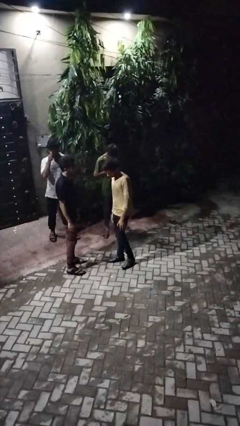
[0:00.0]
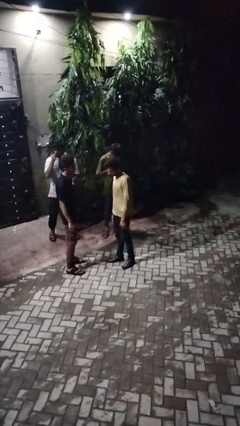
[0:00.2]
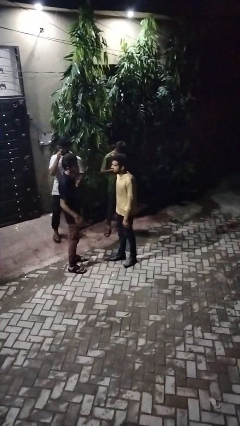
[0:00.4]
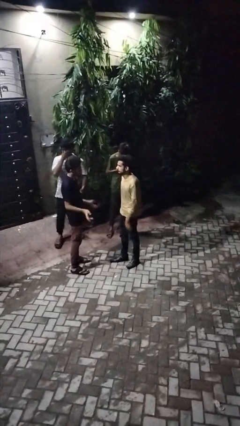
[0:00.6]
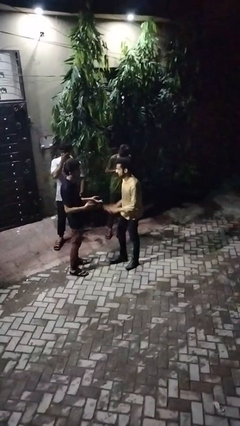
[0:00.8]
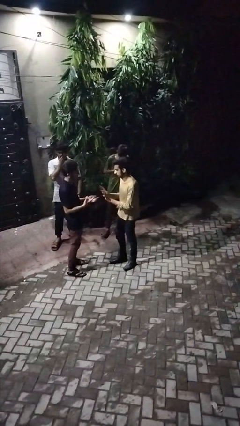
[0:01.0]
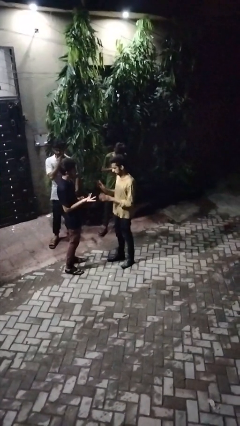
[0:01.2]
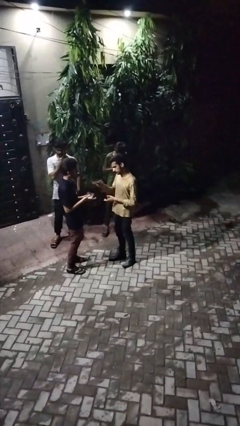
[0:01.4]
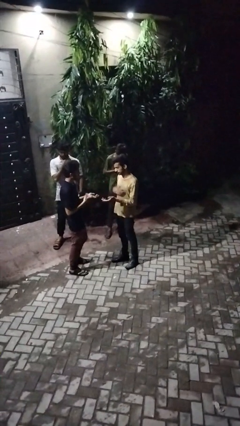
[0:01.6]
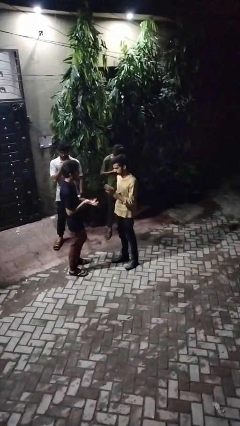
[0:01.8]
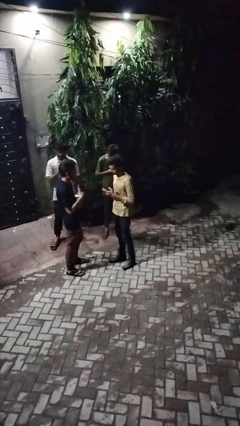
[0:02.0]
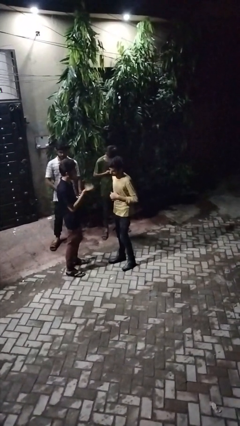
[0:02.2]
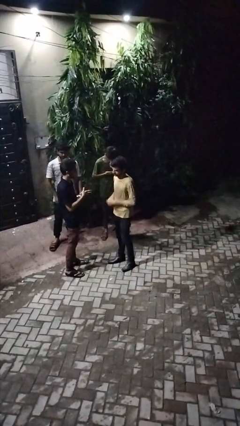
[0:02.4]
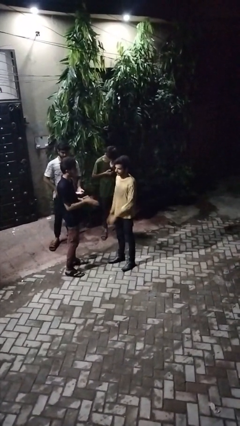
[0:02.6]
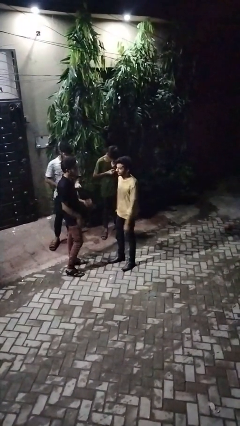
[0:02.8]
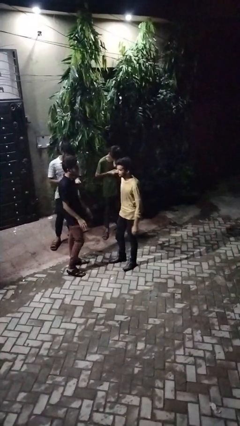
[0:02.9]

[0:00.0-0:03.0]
person talks to person

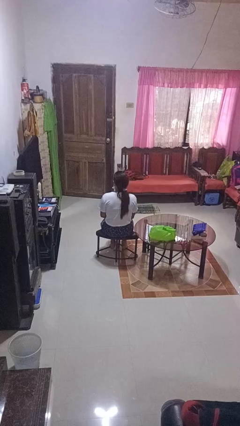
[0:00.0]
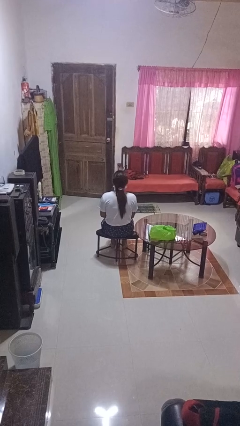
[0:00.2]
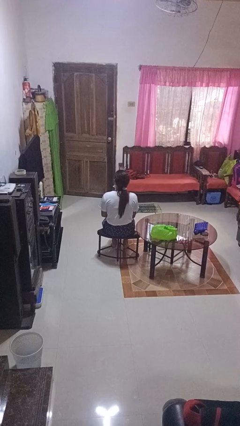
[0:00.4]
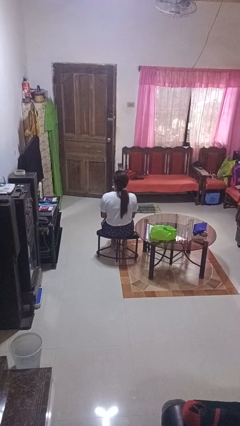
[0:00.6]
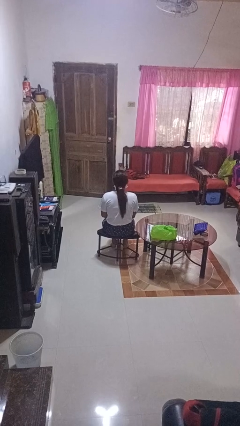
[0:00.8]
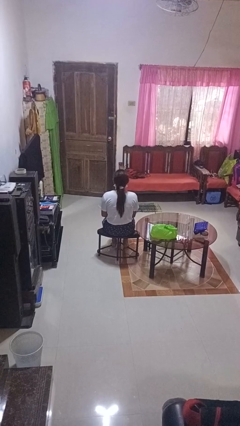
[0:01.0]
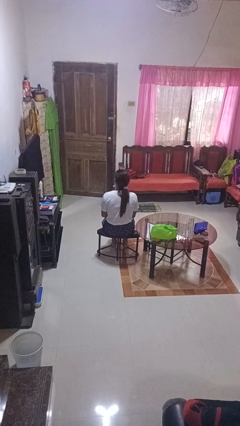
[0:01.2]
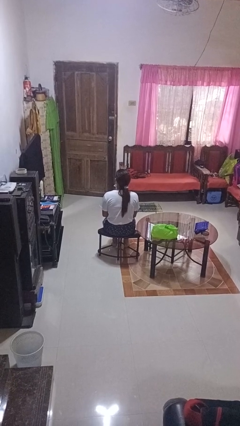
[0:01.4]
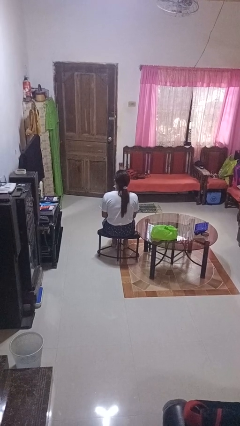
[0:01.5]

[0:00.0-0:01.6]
person shakes head

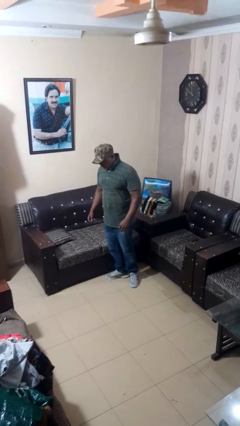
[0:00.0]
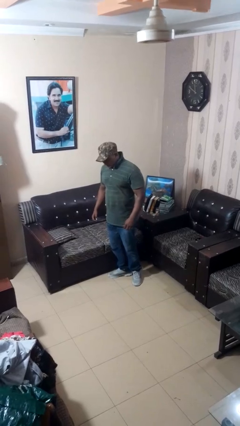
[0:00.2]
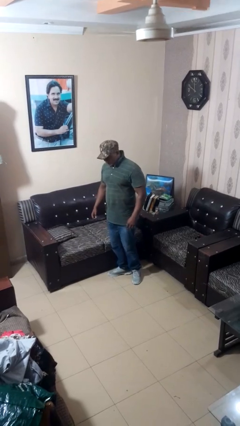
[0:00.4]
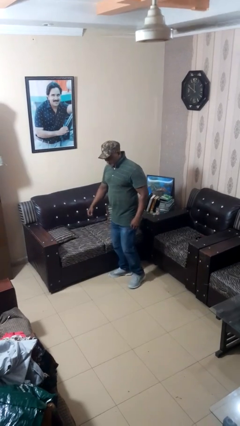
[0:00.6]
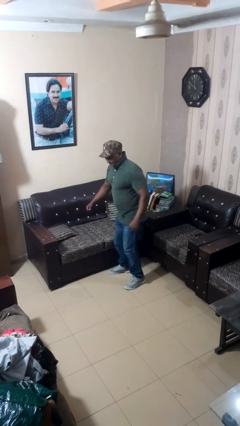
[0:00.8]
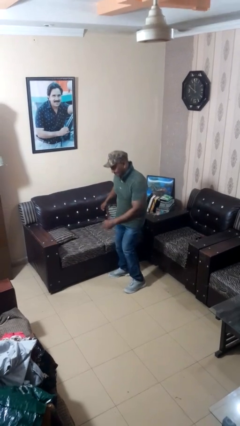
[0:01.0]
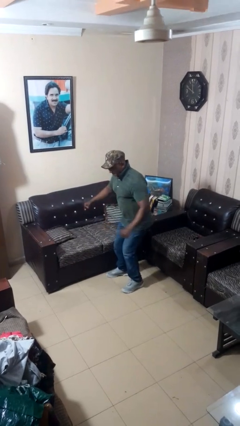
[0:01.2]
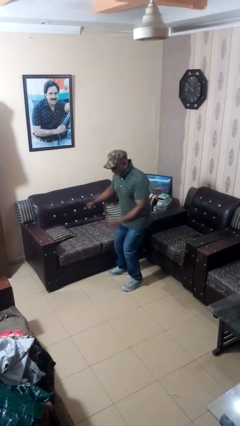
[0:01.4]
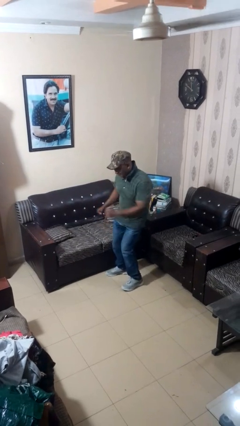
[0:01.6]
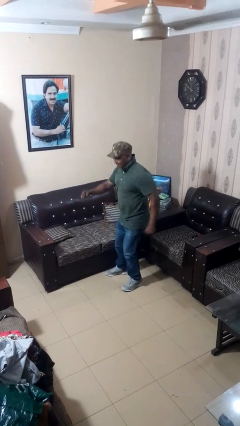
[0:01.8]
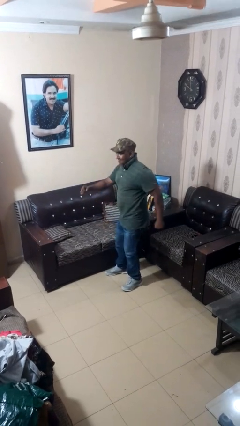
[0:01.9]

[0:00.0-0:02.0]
person wiggles hips

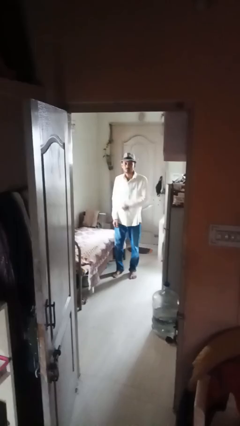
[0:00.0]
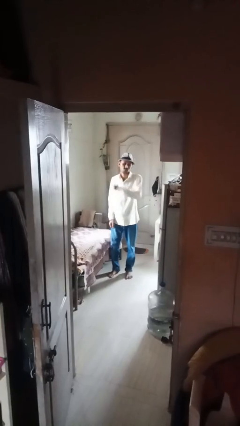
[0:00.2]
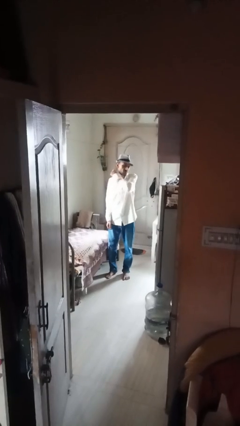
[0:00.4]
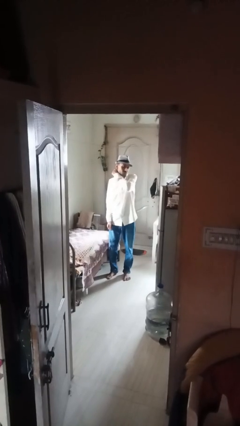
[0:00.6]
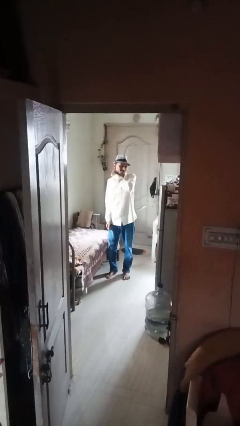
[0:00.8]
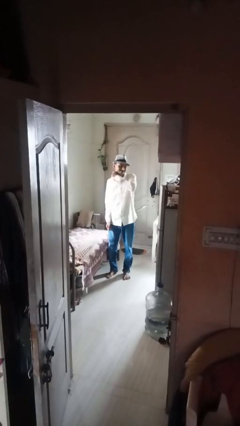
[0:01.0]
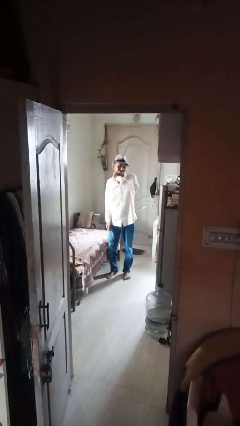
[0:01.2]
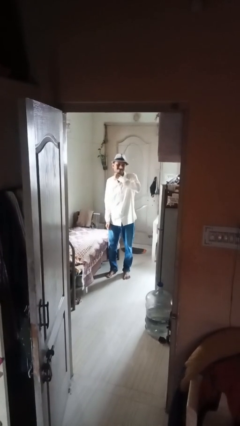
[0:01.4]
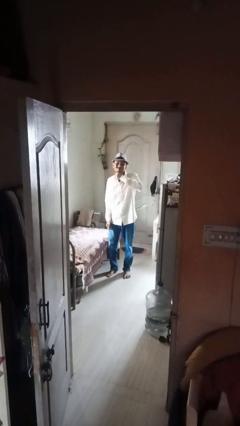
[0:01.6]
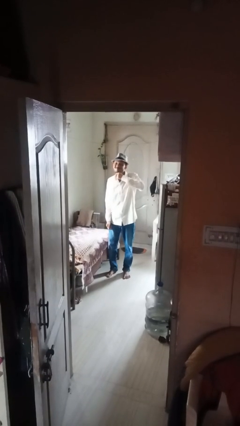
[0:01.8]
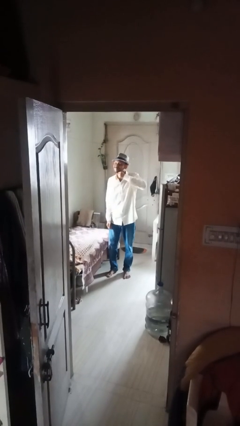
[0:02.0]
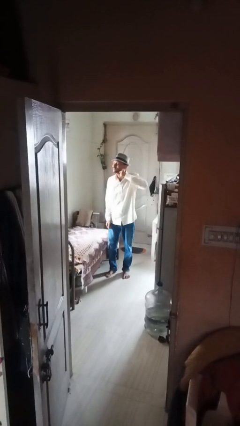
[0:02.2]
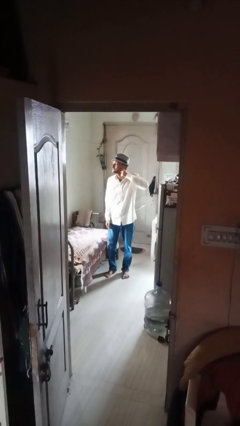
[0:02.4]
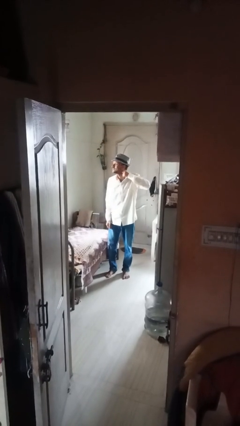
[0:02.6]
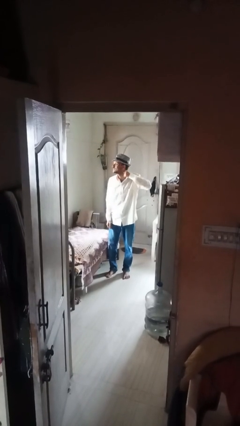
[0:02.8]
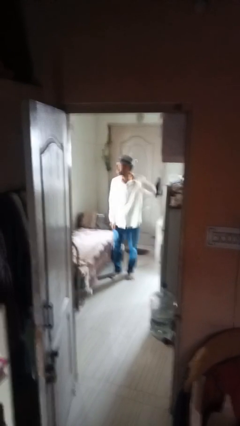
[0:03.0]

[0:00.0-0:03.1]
person gestures cut

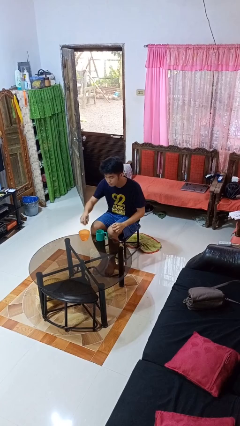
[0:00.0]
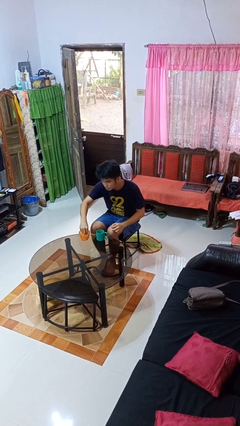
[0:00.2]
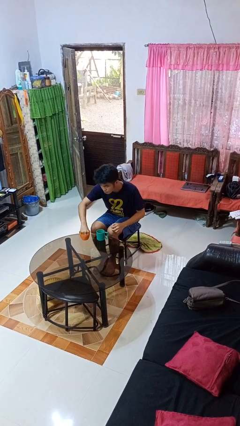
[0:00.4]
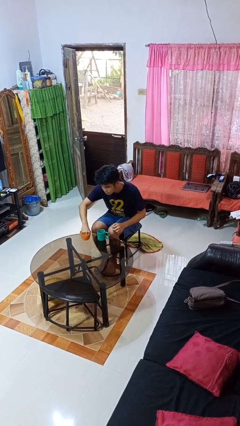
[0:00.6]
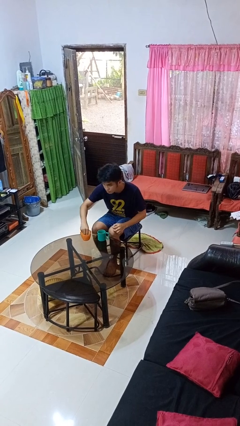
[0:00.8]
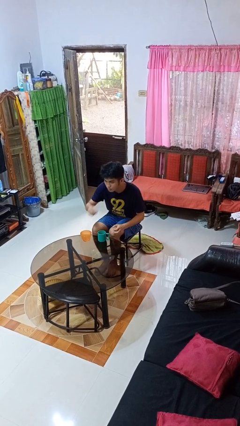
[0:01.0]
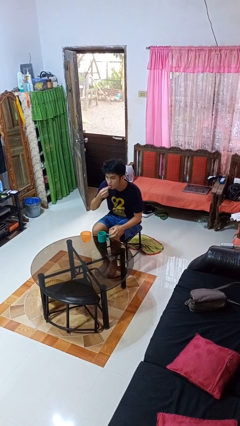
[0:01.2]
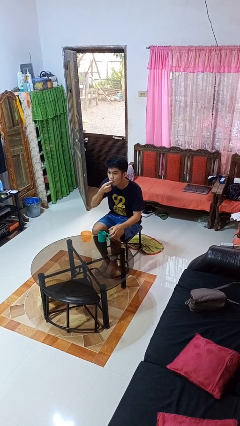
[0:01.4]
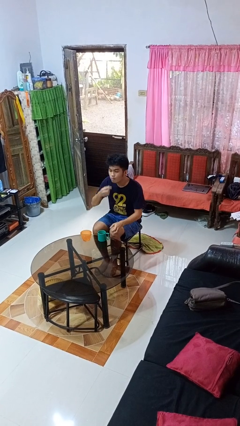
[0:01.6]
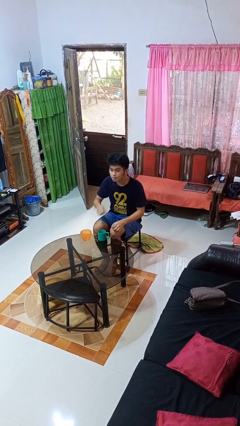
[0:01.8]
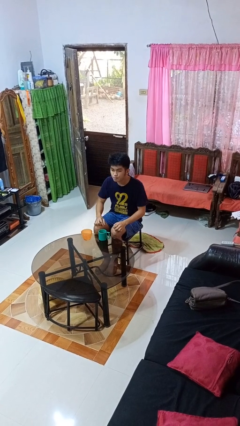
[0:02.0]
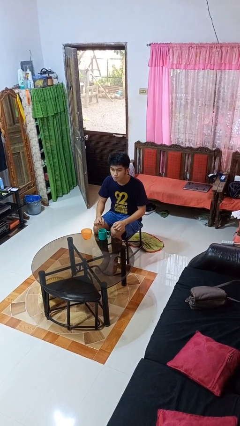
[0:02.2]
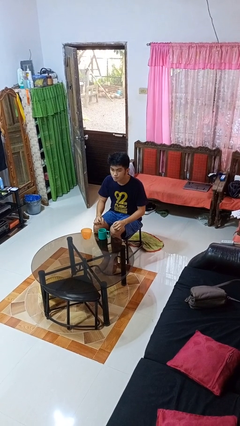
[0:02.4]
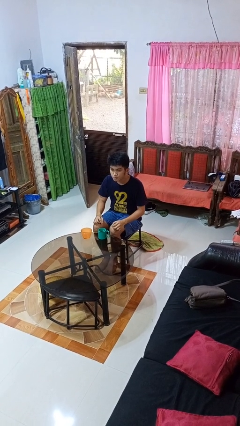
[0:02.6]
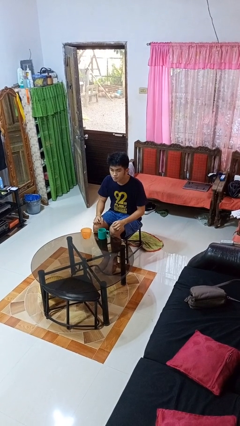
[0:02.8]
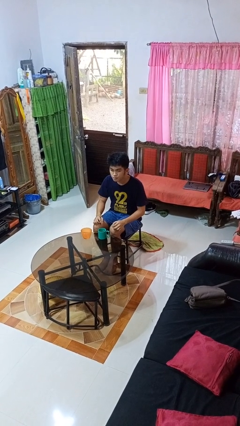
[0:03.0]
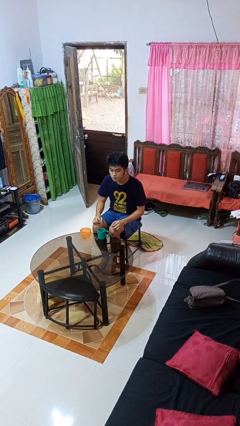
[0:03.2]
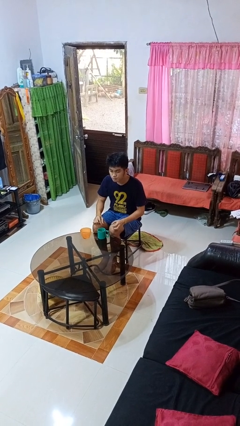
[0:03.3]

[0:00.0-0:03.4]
person takes medicine pills

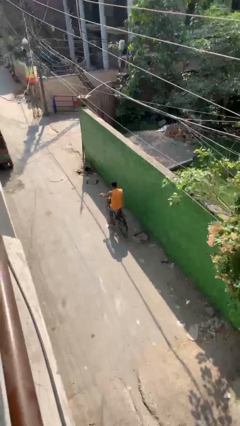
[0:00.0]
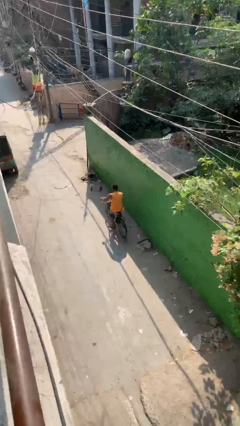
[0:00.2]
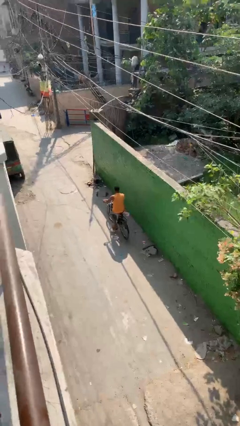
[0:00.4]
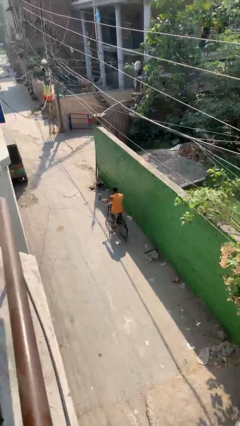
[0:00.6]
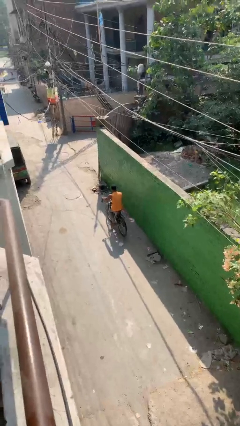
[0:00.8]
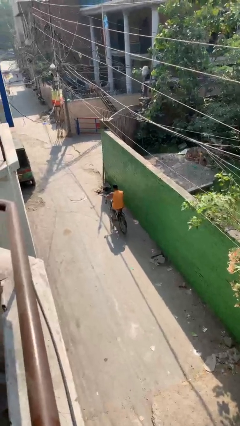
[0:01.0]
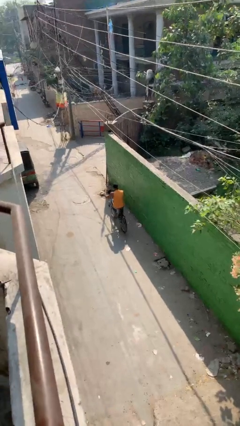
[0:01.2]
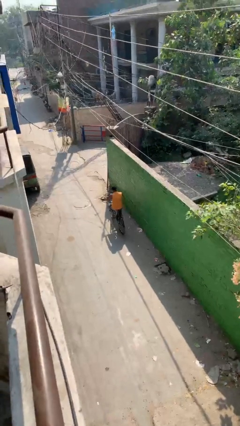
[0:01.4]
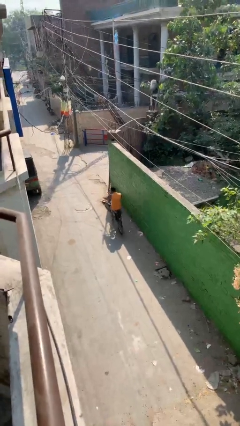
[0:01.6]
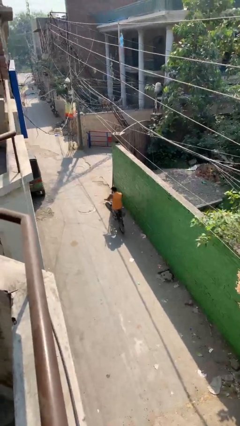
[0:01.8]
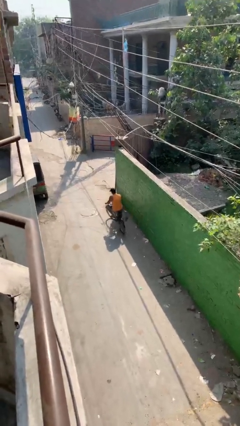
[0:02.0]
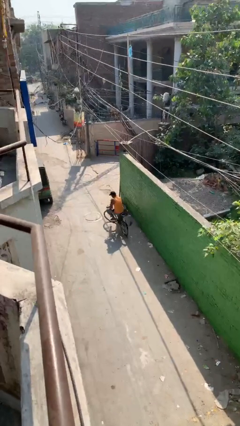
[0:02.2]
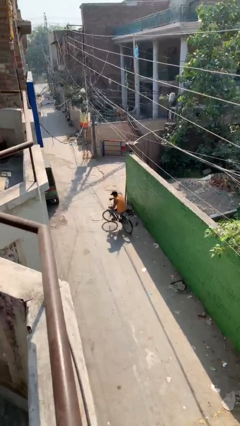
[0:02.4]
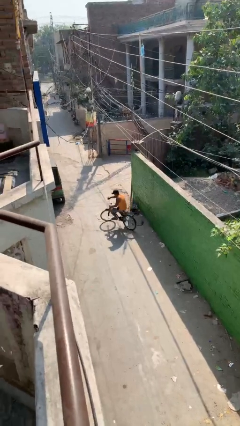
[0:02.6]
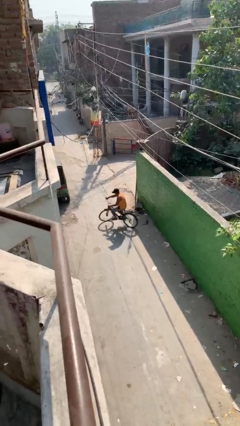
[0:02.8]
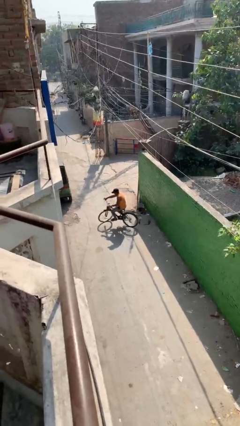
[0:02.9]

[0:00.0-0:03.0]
person rides bicycle

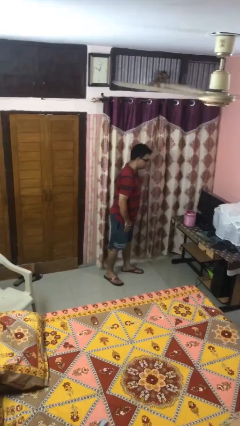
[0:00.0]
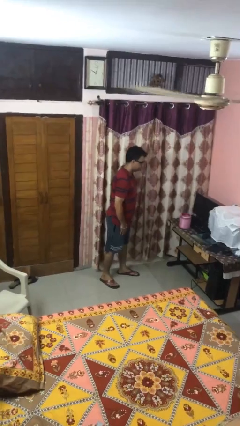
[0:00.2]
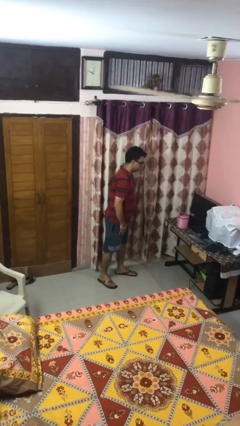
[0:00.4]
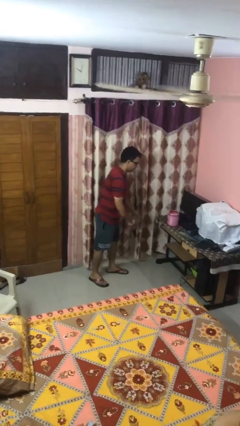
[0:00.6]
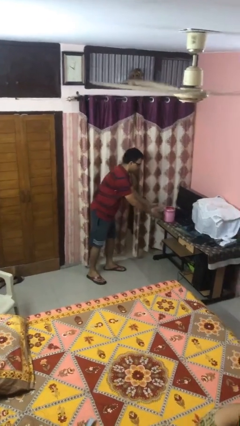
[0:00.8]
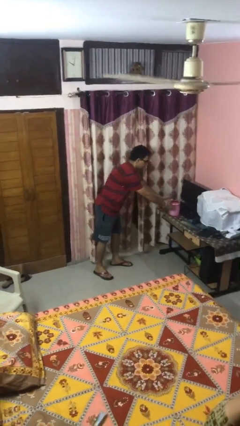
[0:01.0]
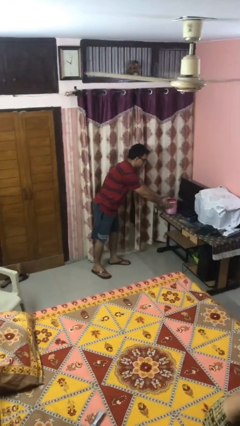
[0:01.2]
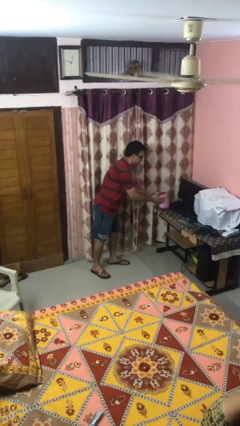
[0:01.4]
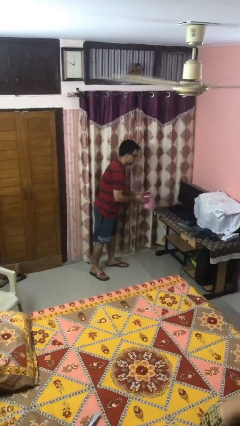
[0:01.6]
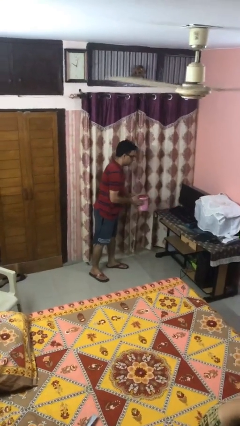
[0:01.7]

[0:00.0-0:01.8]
person picks up object from countertop
